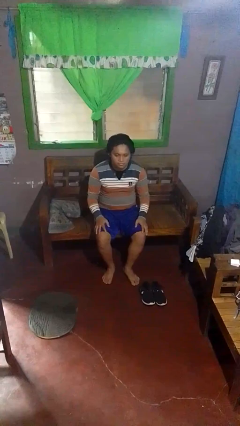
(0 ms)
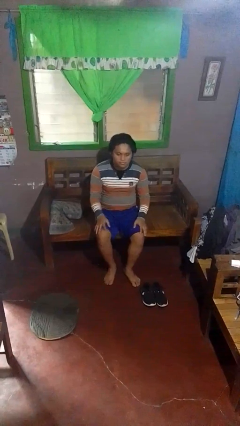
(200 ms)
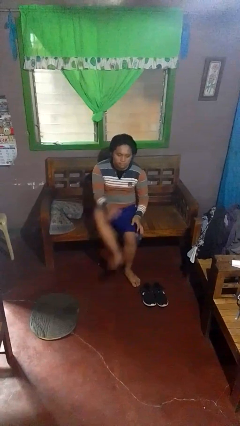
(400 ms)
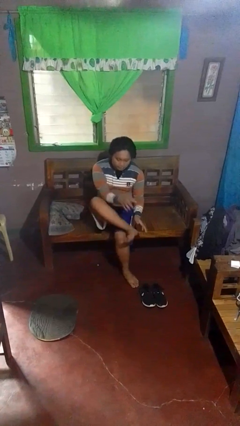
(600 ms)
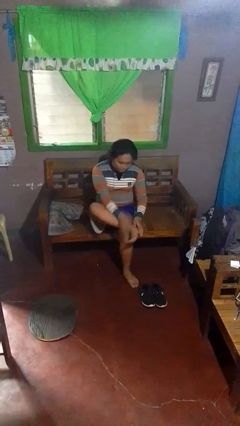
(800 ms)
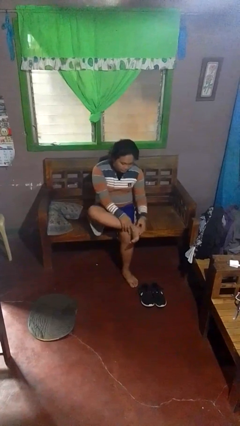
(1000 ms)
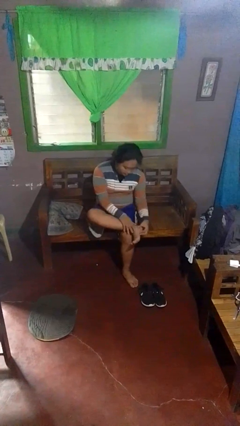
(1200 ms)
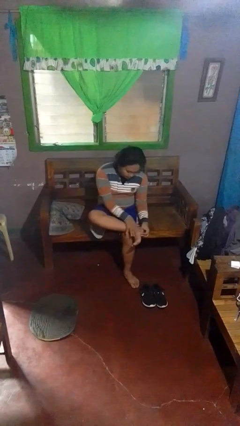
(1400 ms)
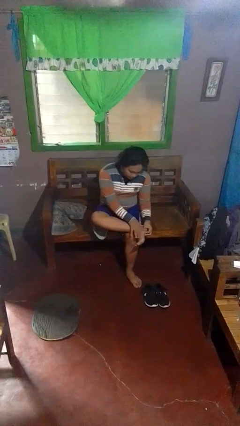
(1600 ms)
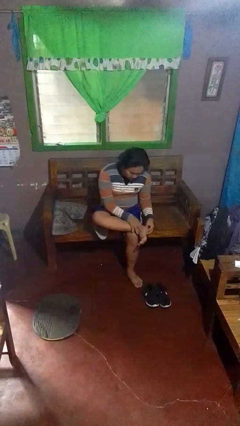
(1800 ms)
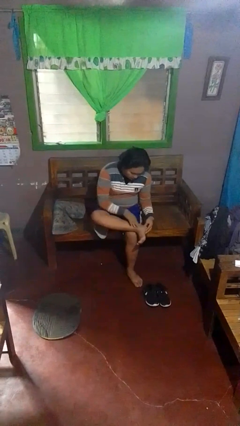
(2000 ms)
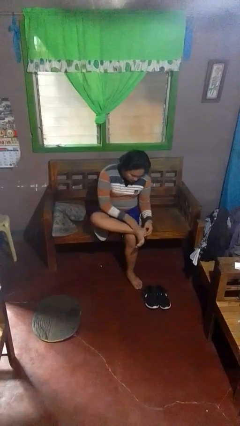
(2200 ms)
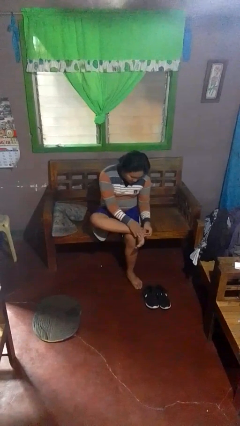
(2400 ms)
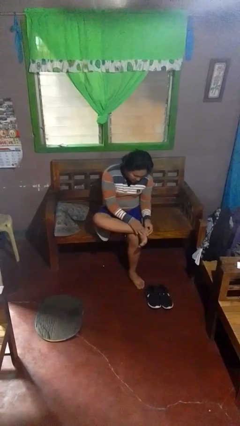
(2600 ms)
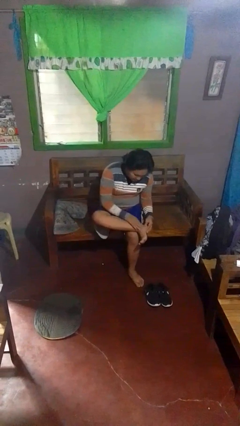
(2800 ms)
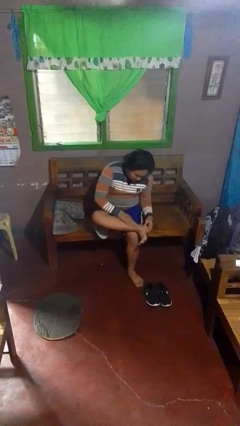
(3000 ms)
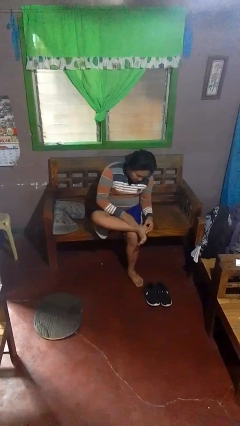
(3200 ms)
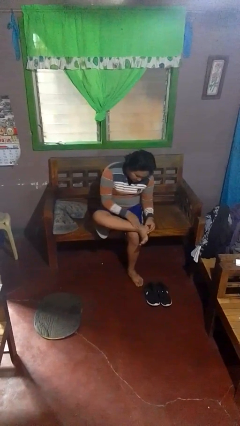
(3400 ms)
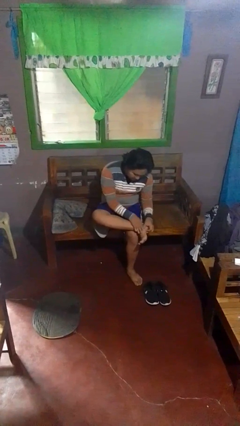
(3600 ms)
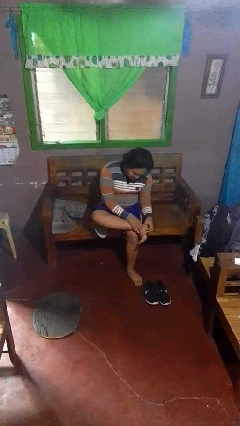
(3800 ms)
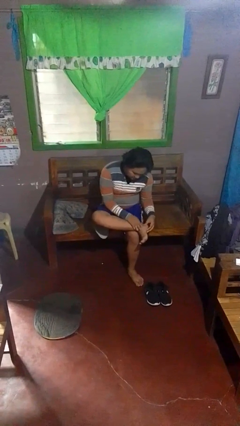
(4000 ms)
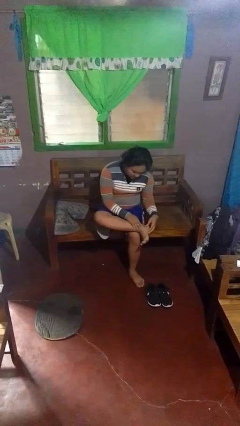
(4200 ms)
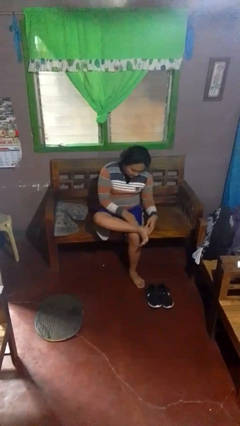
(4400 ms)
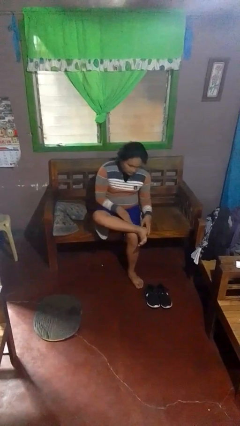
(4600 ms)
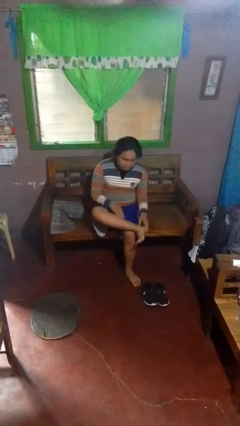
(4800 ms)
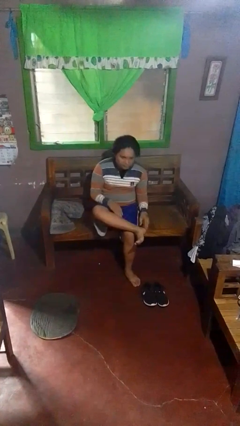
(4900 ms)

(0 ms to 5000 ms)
person rubs foot

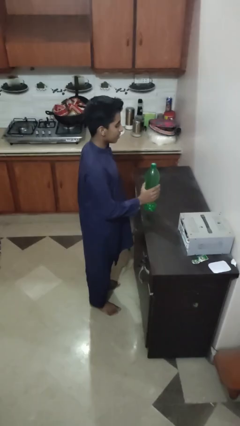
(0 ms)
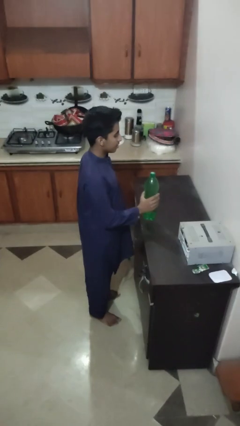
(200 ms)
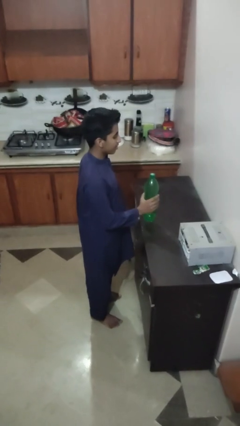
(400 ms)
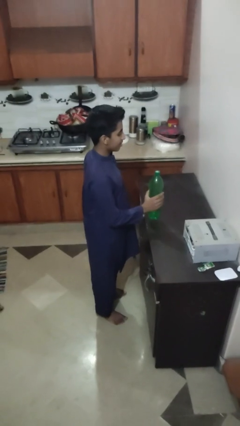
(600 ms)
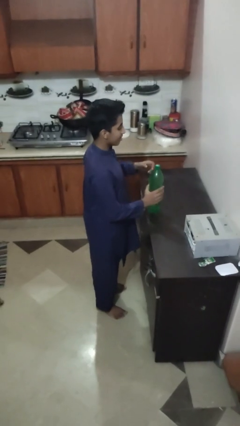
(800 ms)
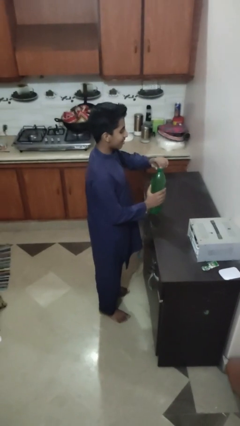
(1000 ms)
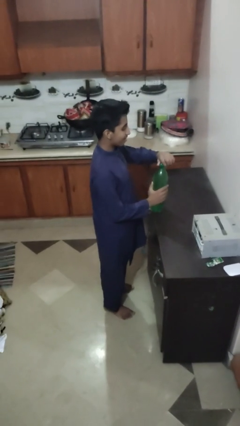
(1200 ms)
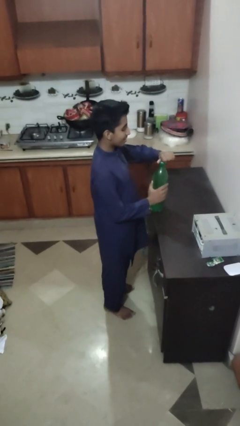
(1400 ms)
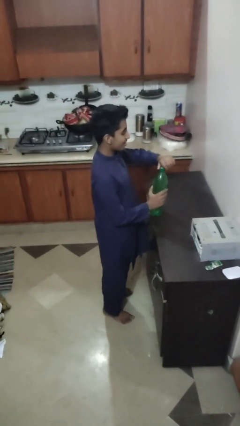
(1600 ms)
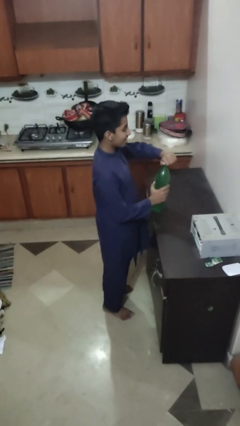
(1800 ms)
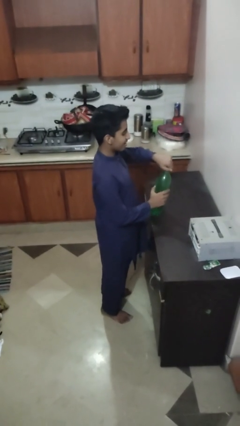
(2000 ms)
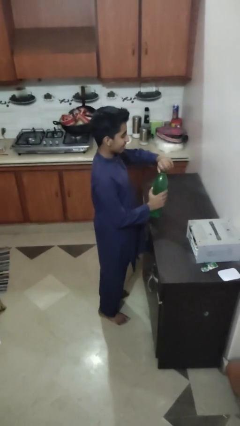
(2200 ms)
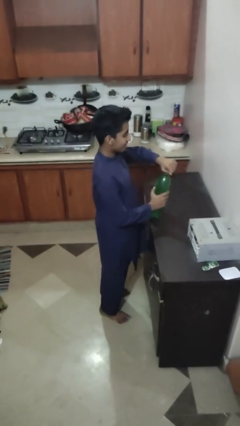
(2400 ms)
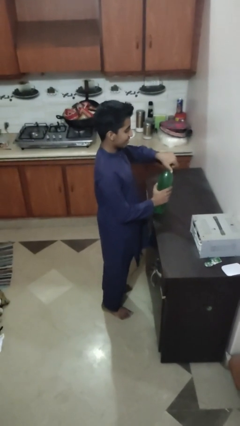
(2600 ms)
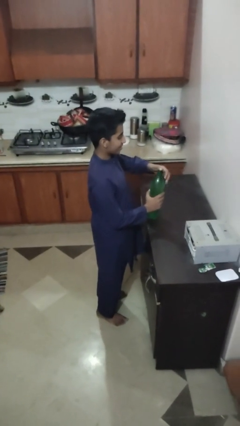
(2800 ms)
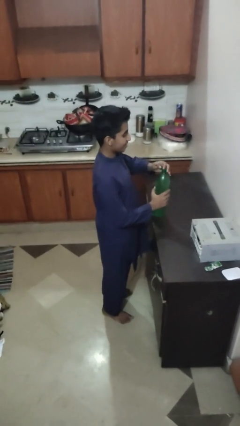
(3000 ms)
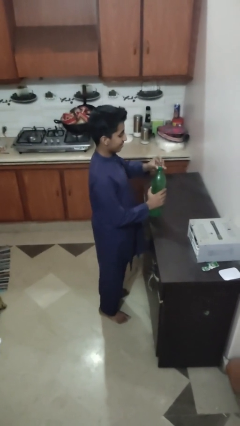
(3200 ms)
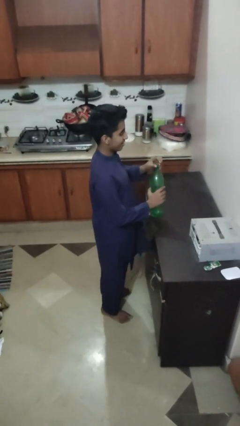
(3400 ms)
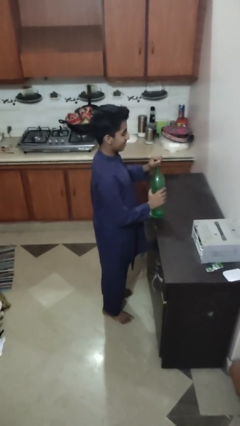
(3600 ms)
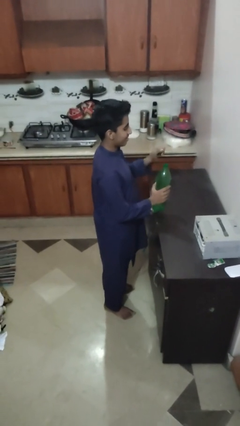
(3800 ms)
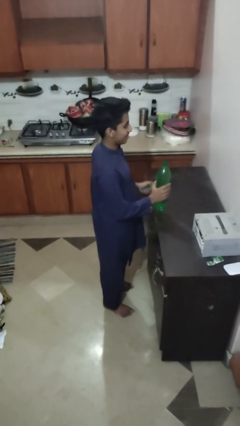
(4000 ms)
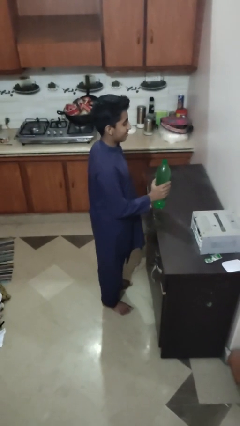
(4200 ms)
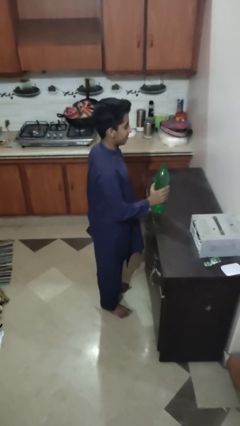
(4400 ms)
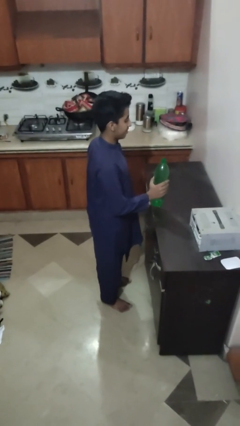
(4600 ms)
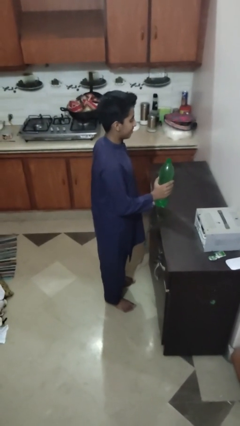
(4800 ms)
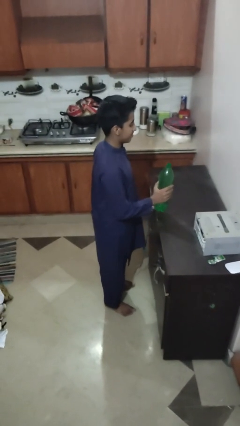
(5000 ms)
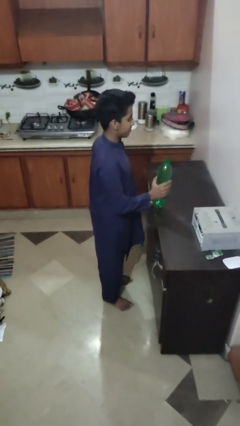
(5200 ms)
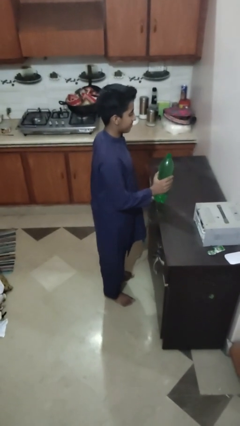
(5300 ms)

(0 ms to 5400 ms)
person unscrews lid from bottle

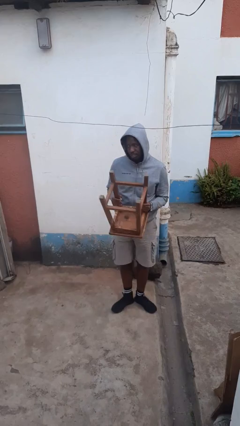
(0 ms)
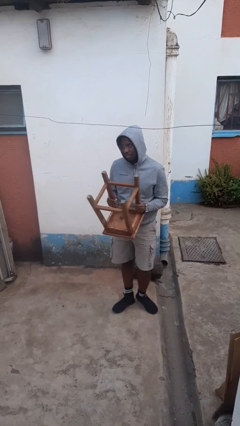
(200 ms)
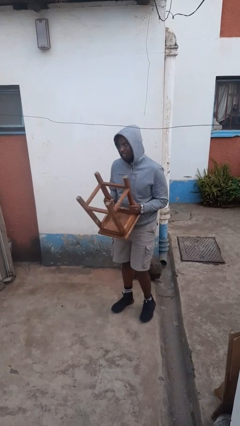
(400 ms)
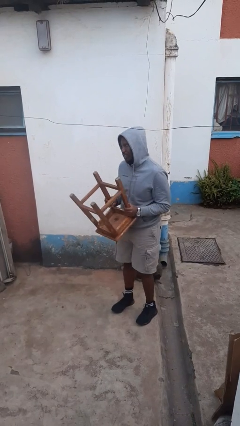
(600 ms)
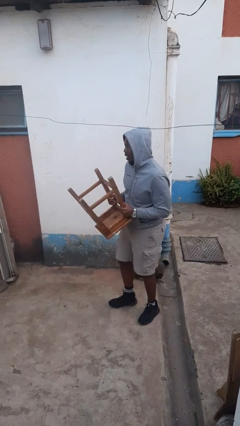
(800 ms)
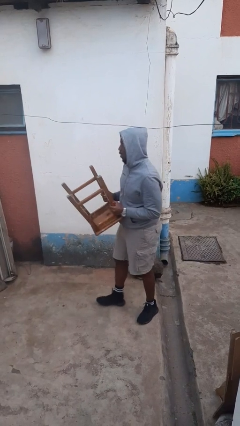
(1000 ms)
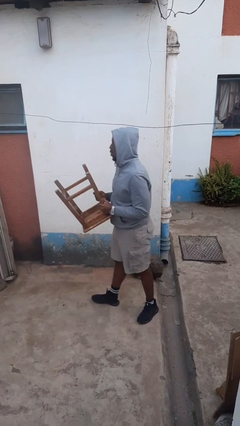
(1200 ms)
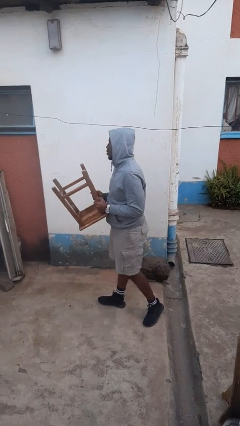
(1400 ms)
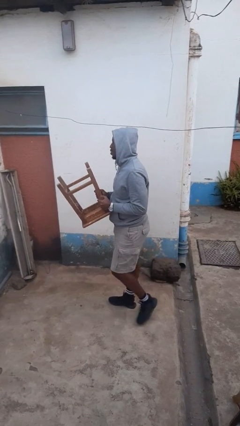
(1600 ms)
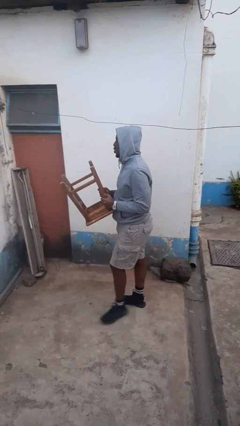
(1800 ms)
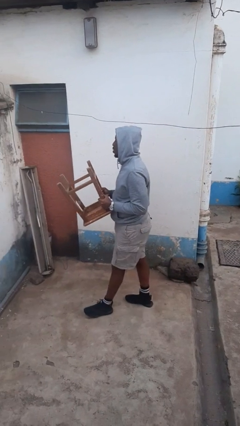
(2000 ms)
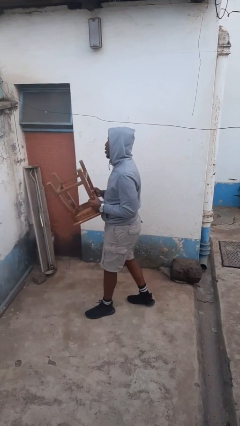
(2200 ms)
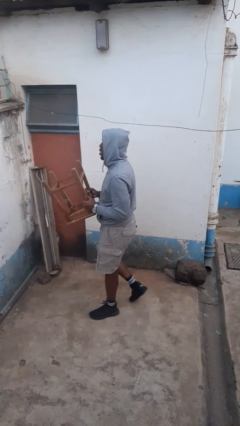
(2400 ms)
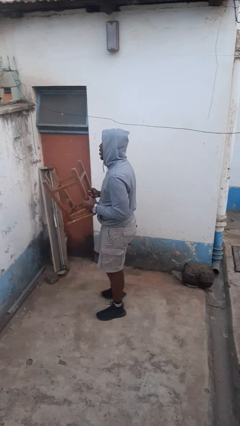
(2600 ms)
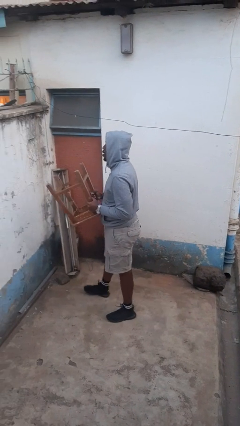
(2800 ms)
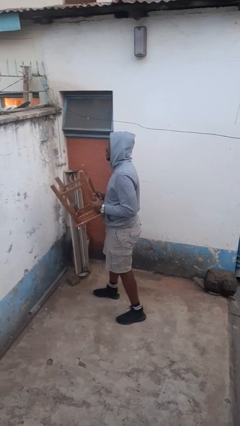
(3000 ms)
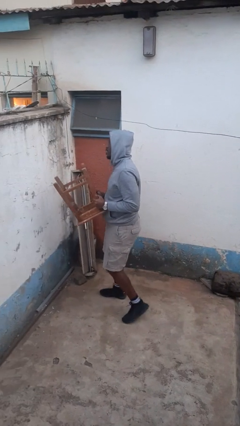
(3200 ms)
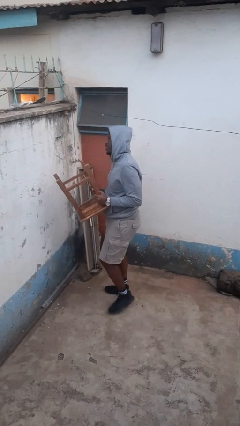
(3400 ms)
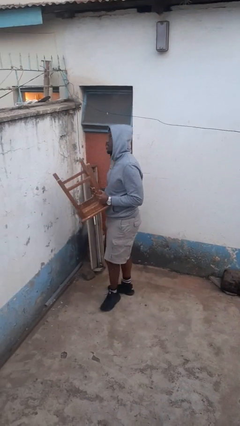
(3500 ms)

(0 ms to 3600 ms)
person carries furniture

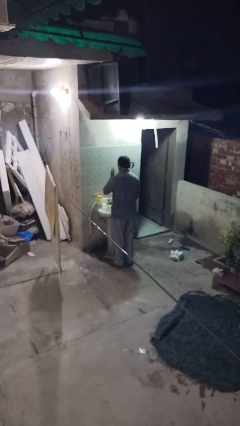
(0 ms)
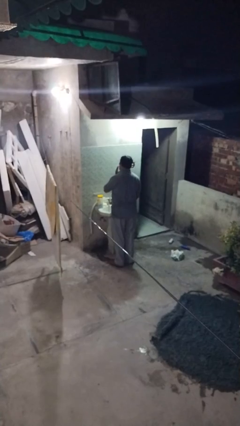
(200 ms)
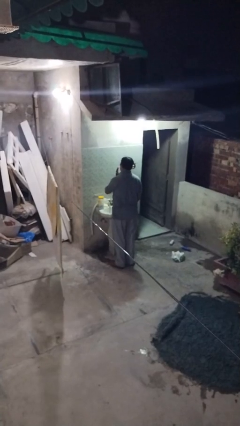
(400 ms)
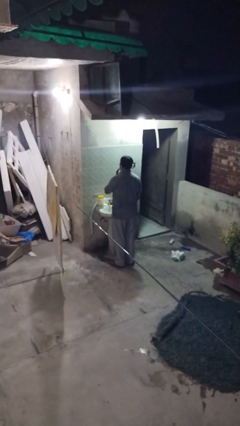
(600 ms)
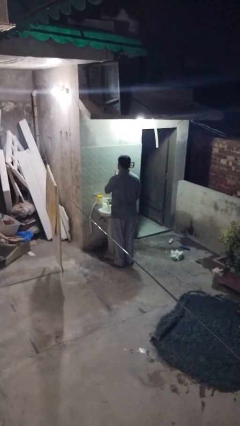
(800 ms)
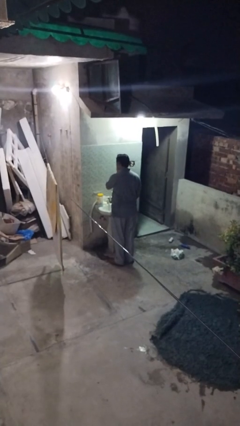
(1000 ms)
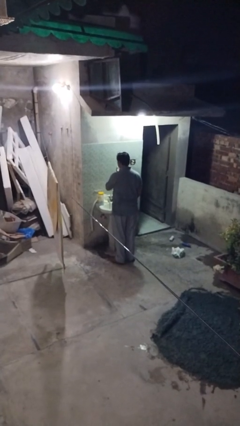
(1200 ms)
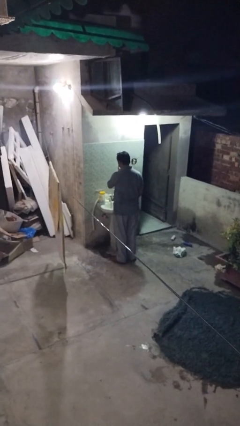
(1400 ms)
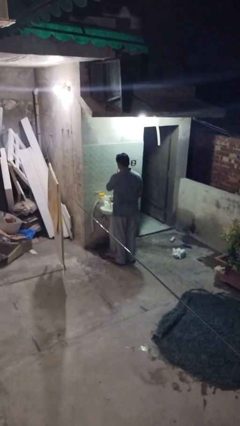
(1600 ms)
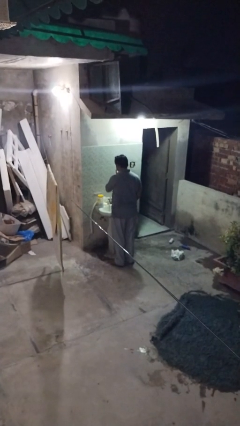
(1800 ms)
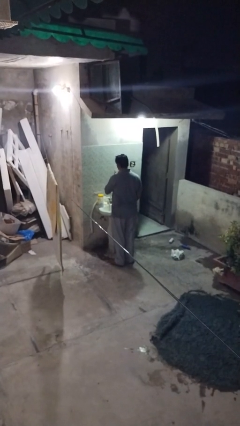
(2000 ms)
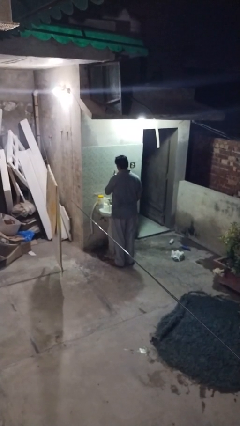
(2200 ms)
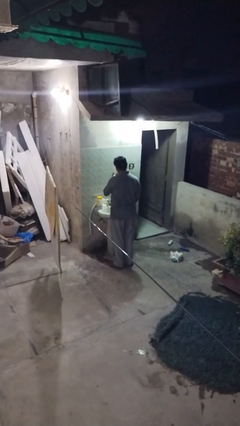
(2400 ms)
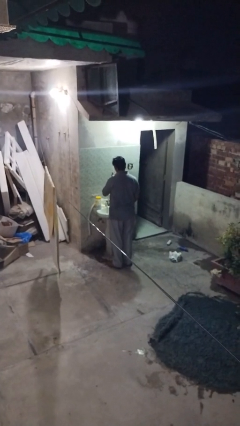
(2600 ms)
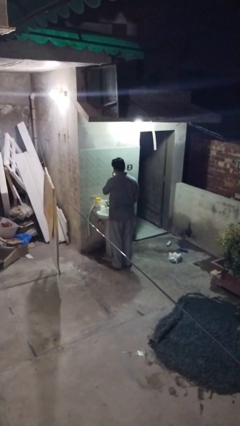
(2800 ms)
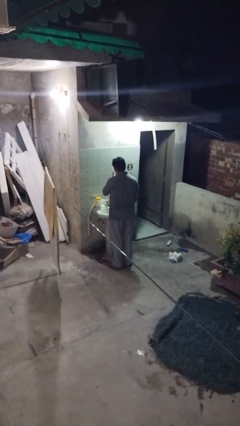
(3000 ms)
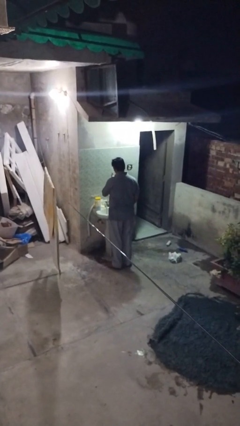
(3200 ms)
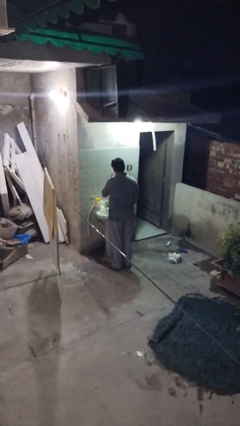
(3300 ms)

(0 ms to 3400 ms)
person applies shaving cream
